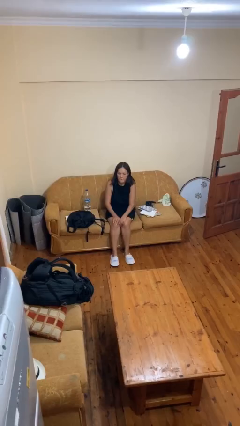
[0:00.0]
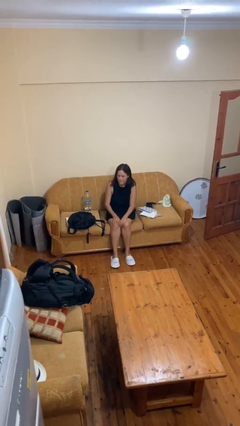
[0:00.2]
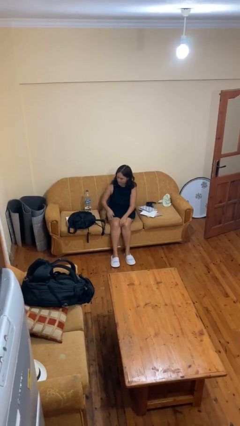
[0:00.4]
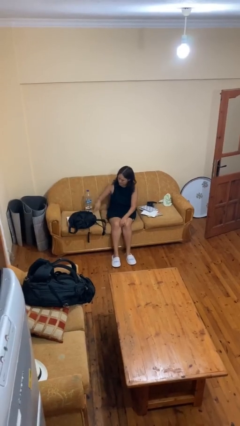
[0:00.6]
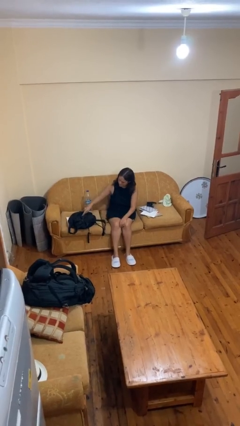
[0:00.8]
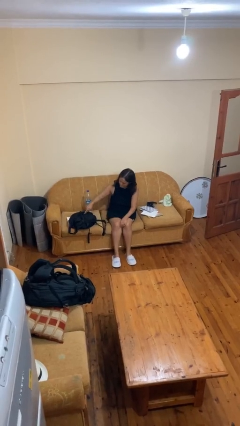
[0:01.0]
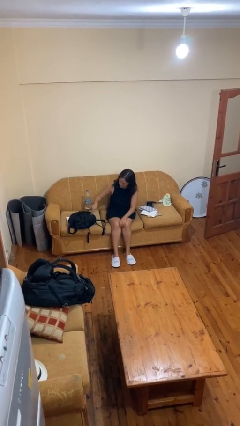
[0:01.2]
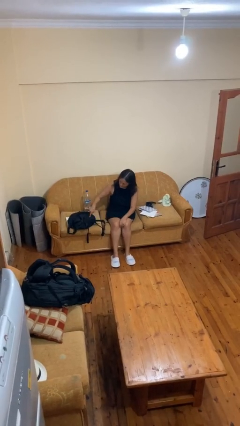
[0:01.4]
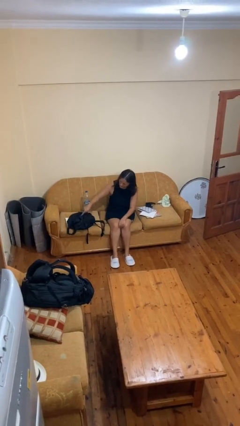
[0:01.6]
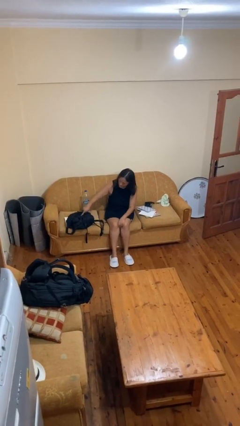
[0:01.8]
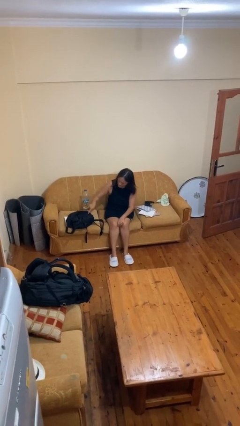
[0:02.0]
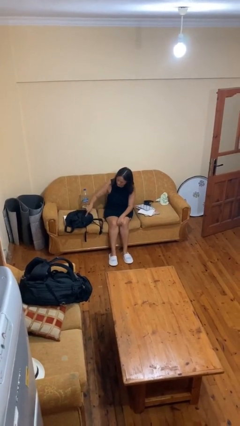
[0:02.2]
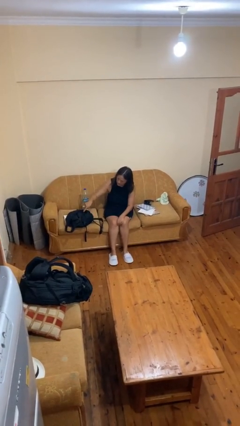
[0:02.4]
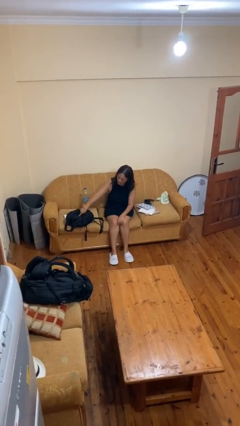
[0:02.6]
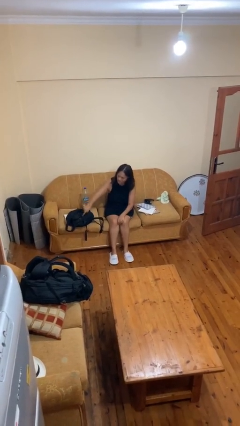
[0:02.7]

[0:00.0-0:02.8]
person taps object with finger

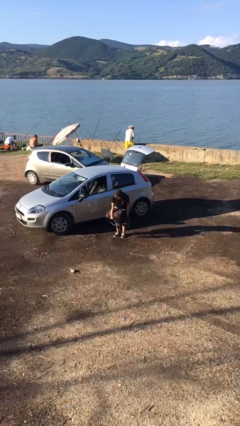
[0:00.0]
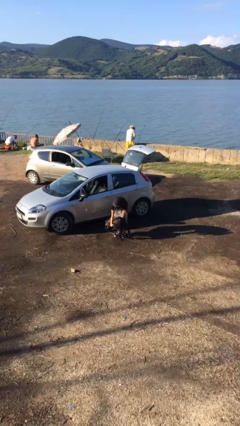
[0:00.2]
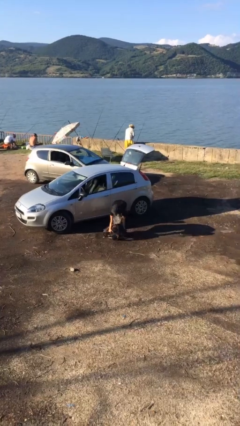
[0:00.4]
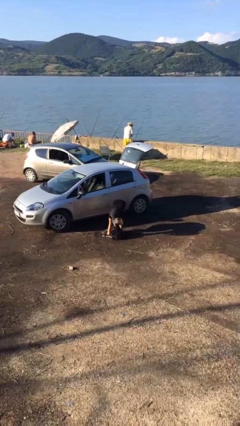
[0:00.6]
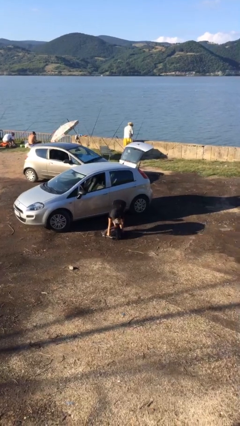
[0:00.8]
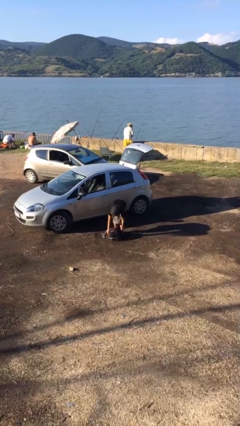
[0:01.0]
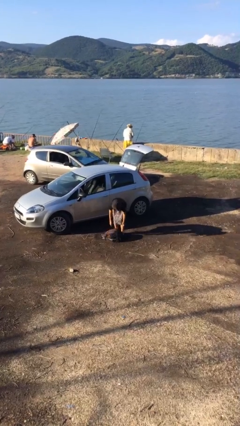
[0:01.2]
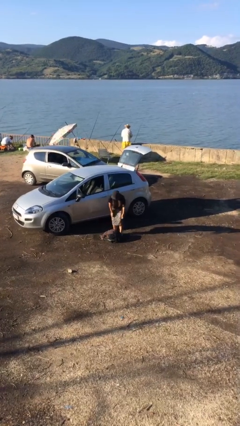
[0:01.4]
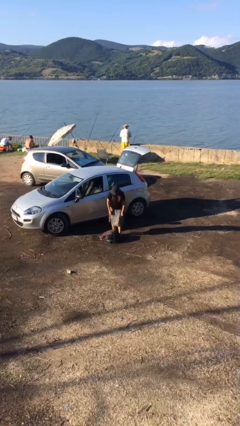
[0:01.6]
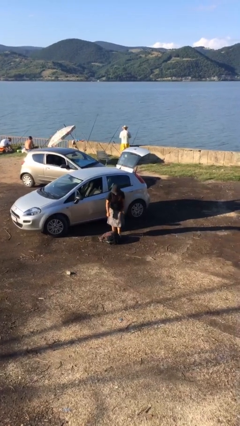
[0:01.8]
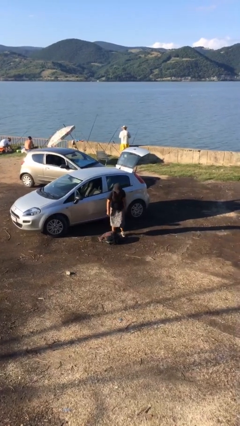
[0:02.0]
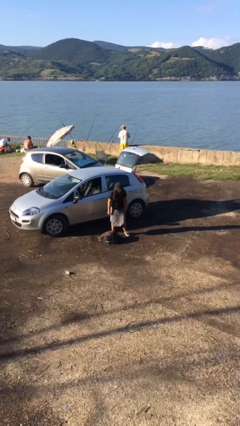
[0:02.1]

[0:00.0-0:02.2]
person puts down object on floor

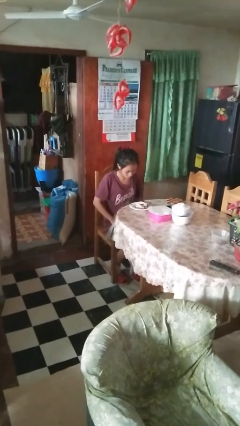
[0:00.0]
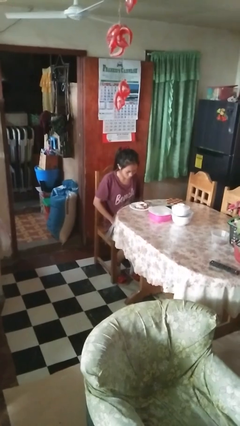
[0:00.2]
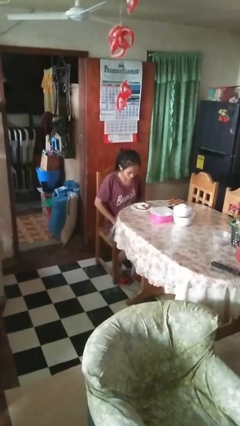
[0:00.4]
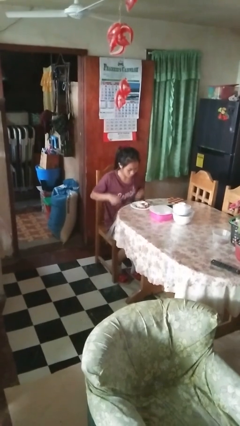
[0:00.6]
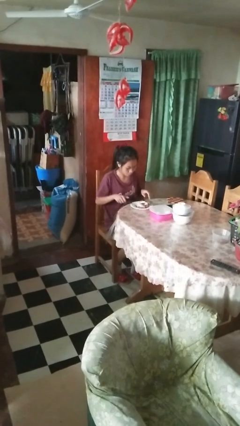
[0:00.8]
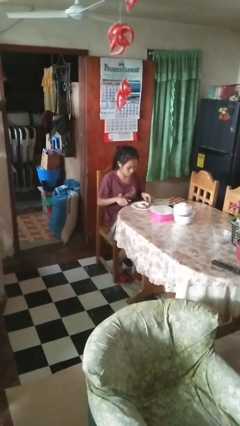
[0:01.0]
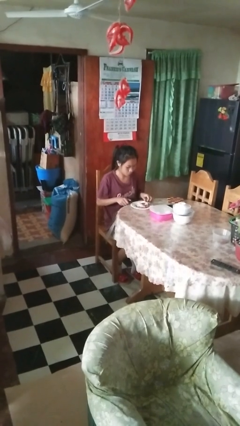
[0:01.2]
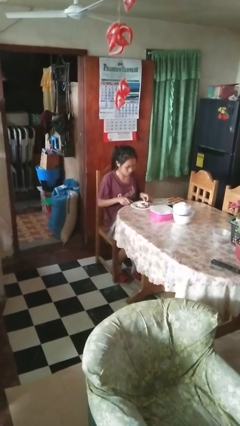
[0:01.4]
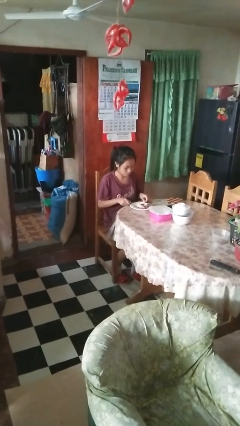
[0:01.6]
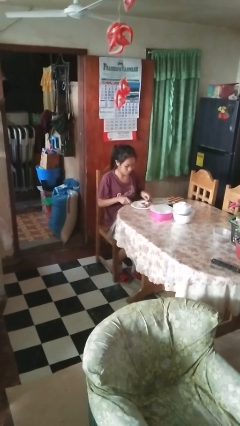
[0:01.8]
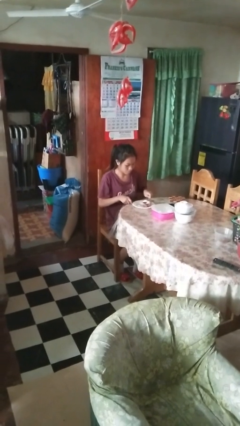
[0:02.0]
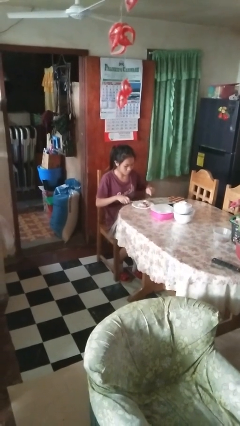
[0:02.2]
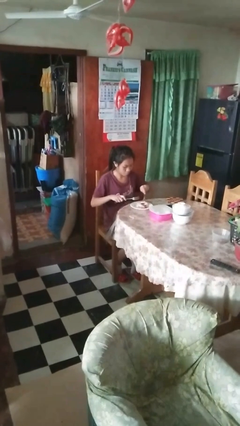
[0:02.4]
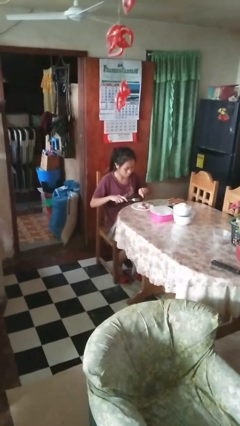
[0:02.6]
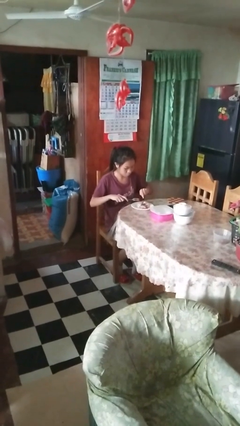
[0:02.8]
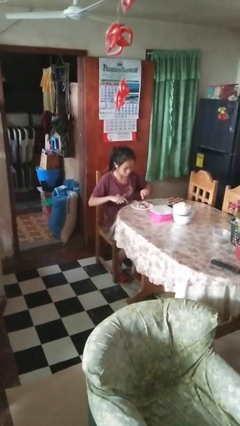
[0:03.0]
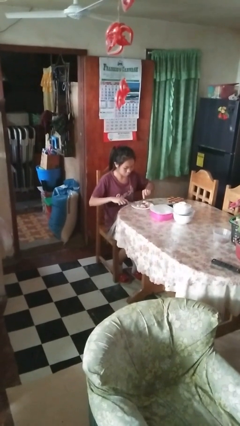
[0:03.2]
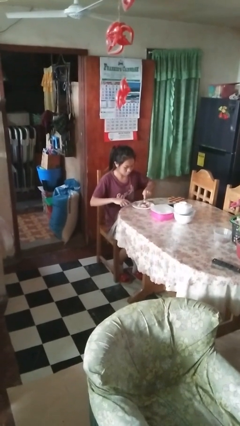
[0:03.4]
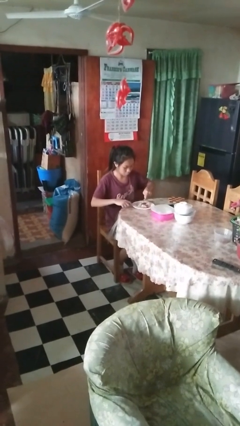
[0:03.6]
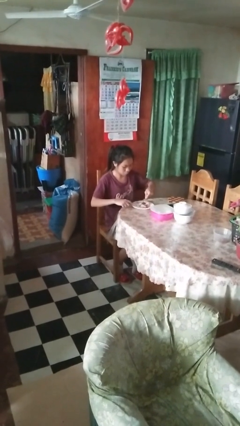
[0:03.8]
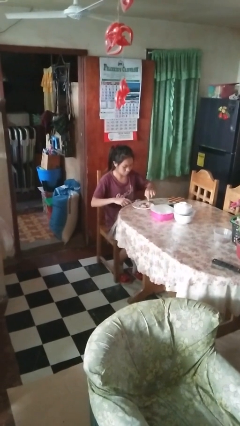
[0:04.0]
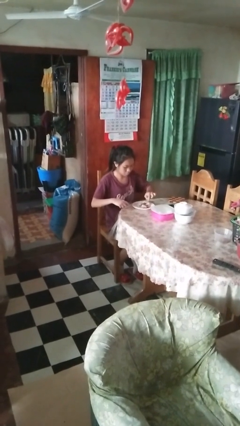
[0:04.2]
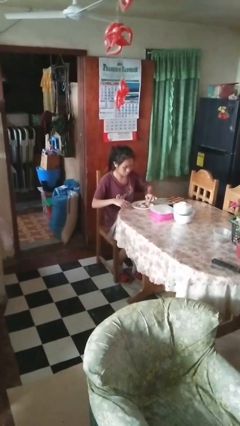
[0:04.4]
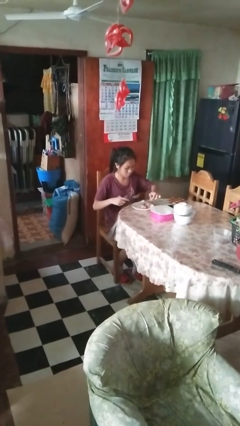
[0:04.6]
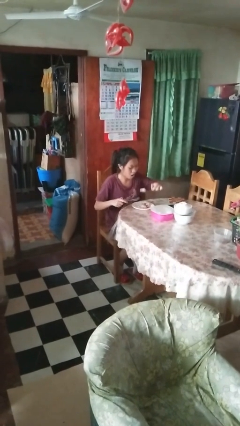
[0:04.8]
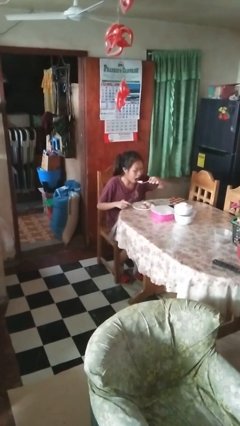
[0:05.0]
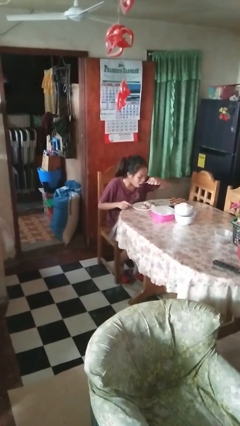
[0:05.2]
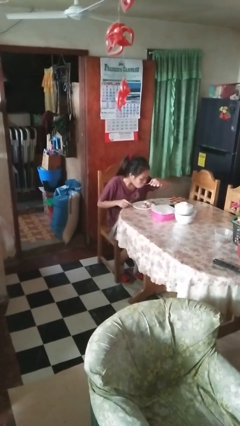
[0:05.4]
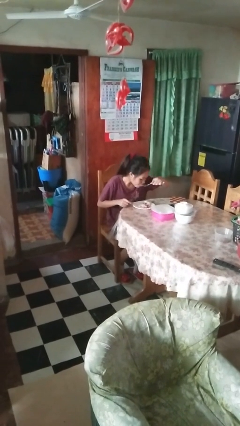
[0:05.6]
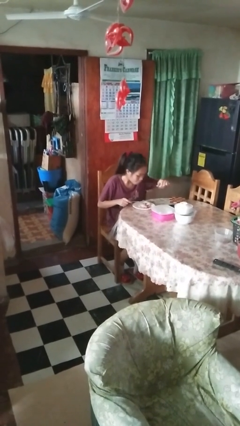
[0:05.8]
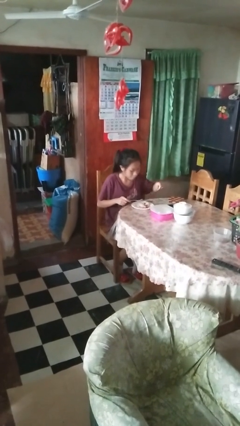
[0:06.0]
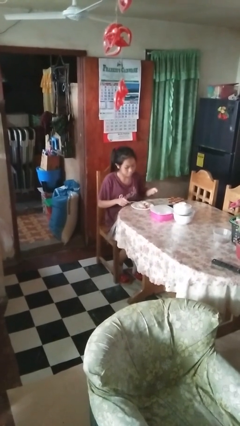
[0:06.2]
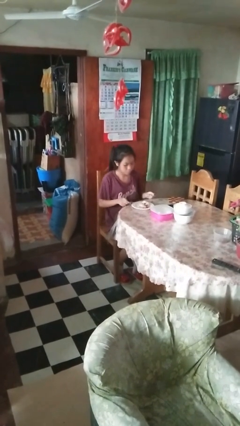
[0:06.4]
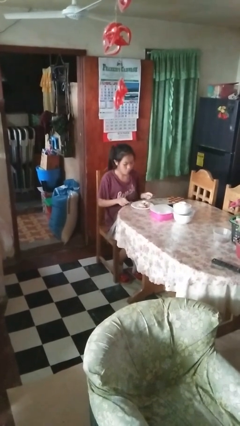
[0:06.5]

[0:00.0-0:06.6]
person eats with utensil

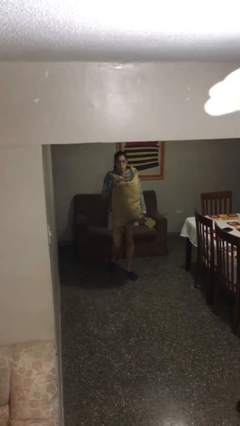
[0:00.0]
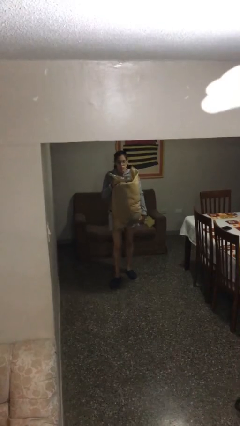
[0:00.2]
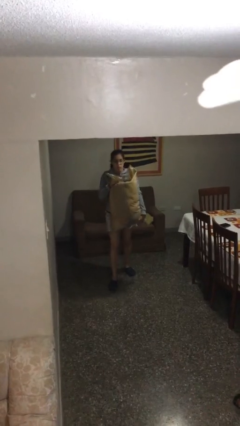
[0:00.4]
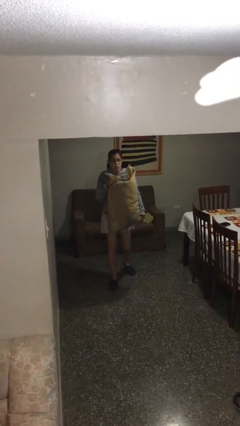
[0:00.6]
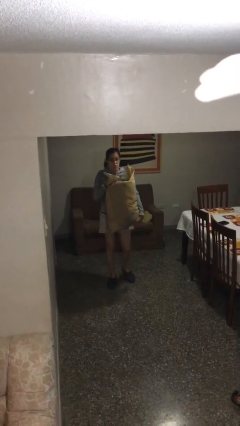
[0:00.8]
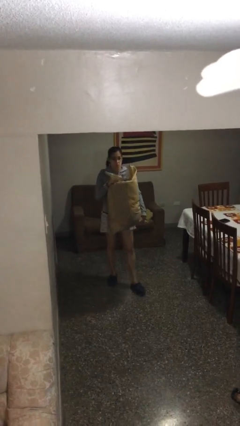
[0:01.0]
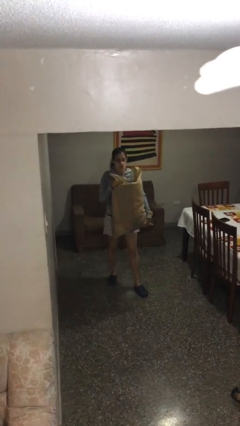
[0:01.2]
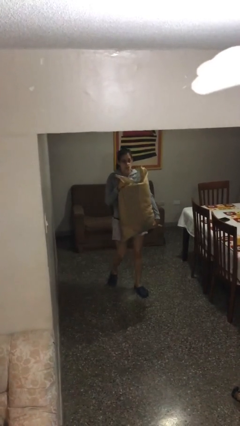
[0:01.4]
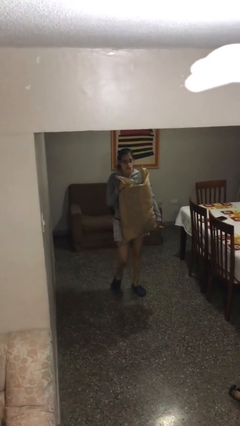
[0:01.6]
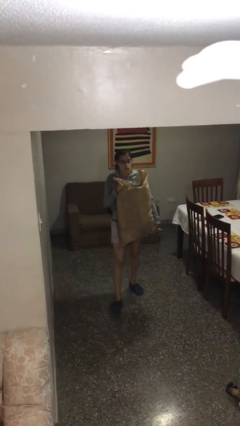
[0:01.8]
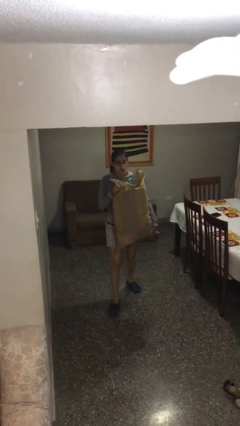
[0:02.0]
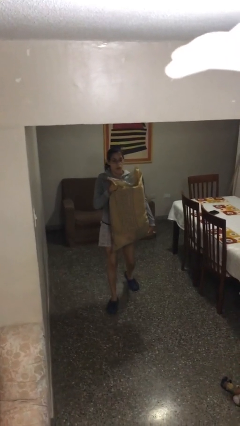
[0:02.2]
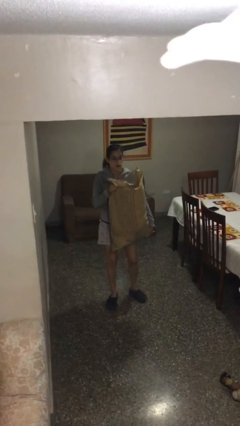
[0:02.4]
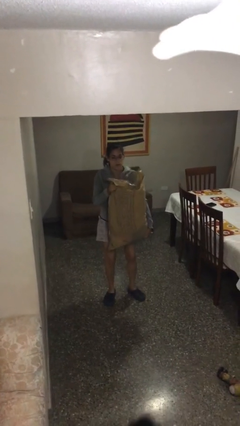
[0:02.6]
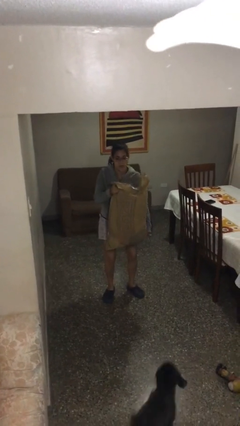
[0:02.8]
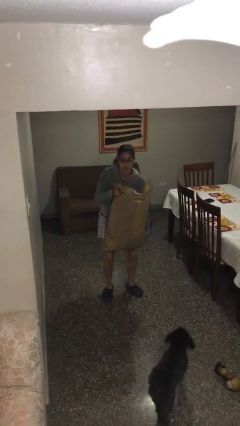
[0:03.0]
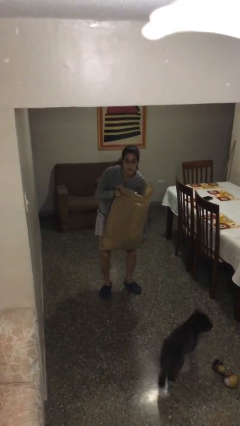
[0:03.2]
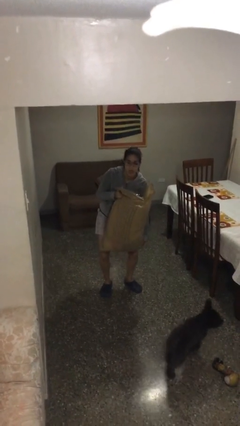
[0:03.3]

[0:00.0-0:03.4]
person carries heavy object

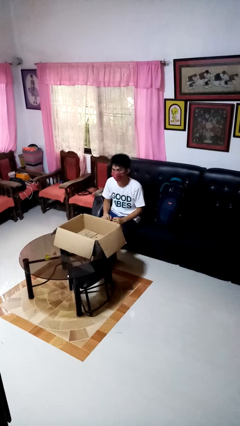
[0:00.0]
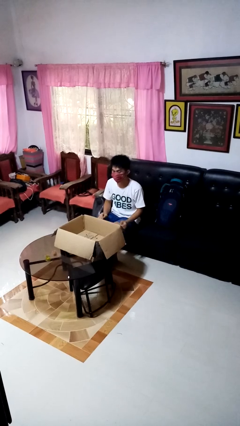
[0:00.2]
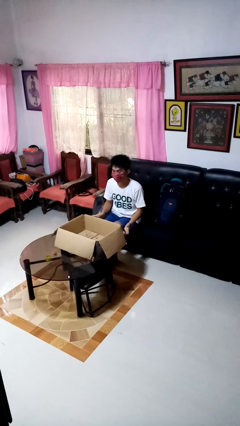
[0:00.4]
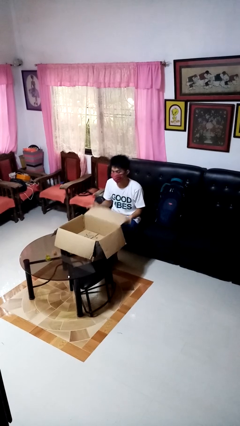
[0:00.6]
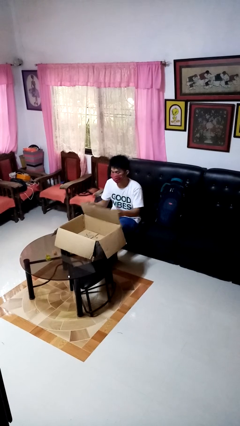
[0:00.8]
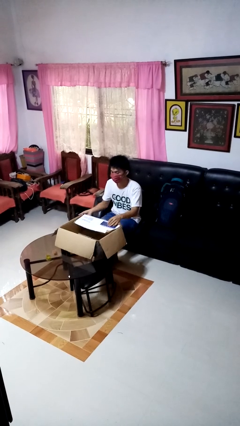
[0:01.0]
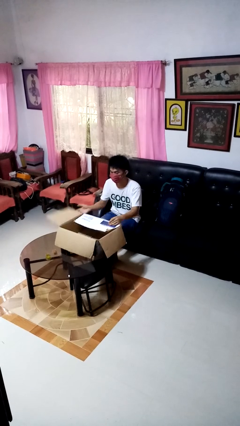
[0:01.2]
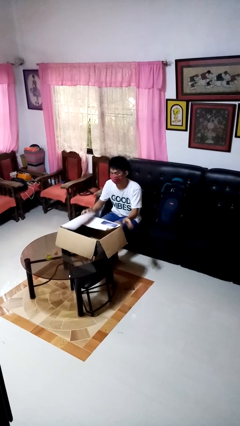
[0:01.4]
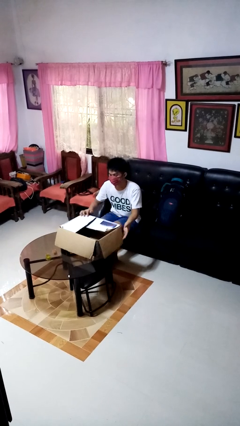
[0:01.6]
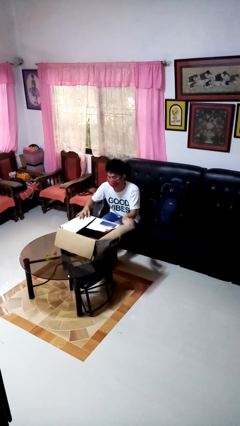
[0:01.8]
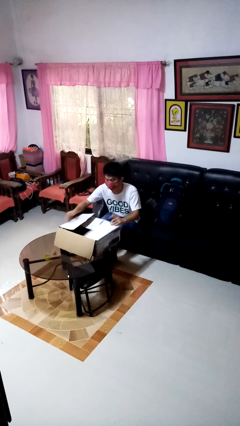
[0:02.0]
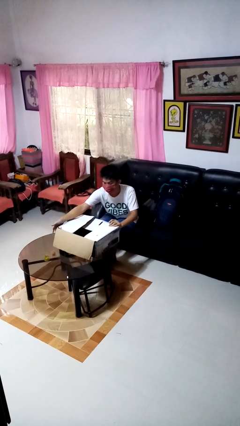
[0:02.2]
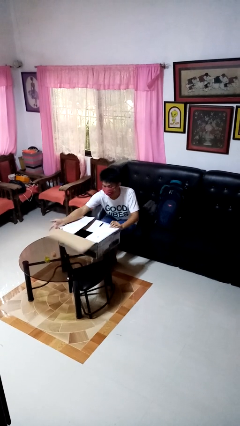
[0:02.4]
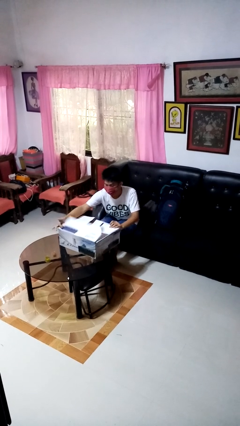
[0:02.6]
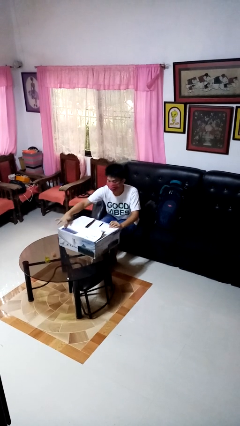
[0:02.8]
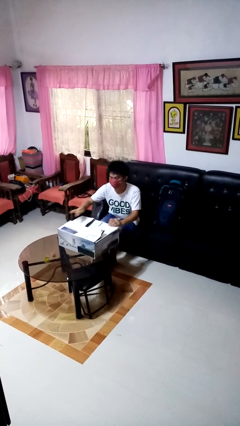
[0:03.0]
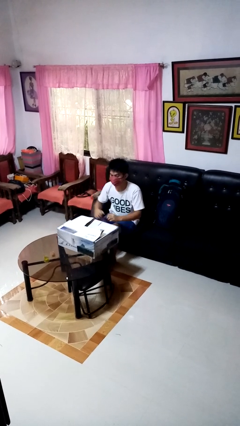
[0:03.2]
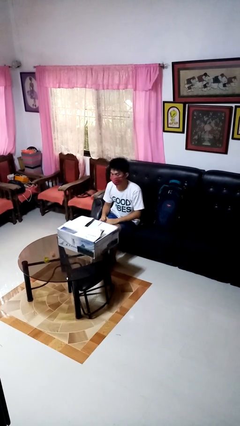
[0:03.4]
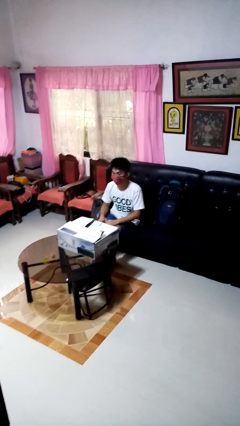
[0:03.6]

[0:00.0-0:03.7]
person closes box
